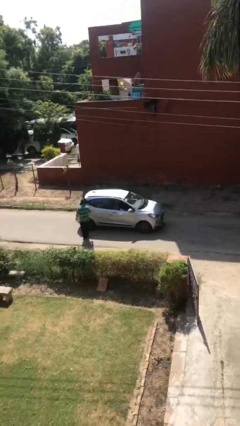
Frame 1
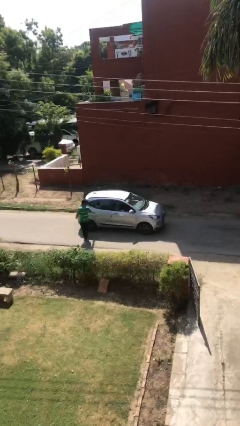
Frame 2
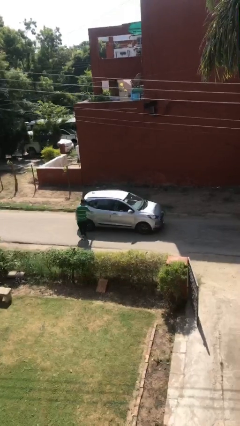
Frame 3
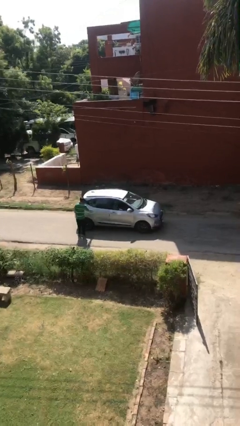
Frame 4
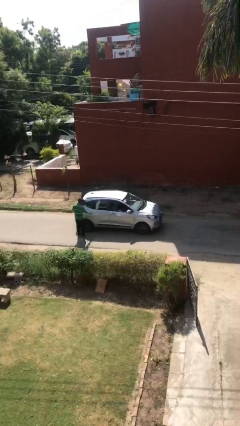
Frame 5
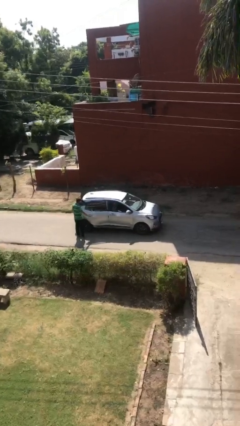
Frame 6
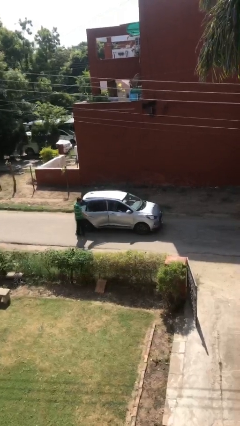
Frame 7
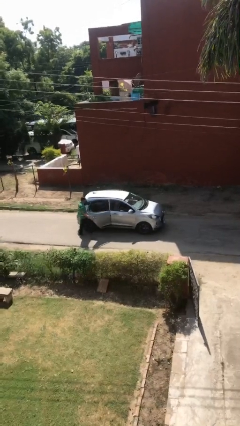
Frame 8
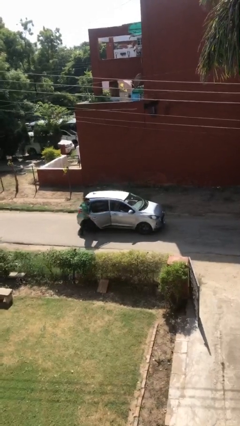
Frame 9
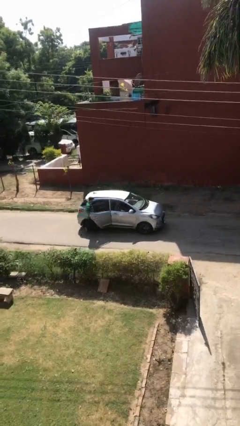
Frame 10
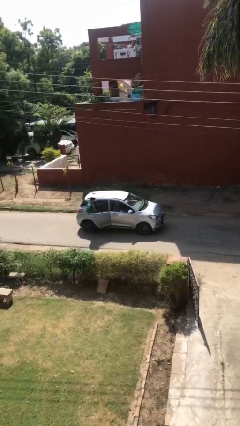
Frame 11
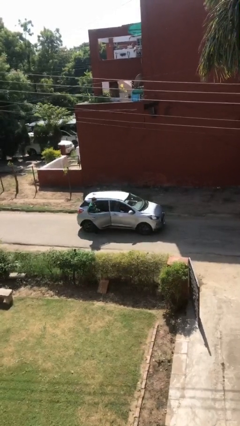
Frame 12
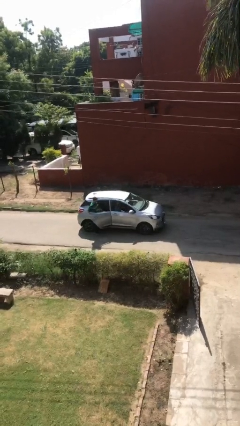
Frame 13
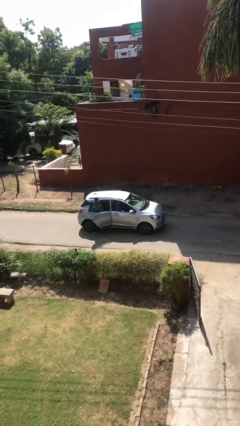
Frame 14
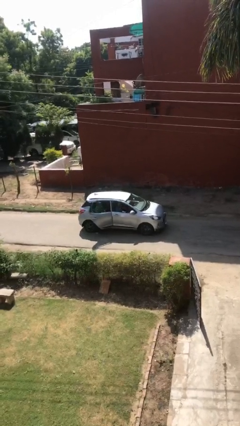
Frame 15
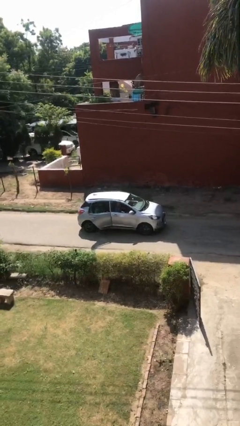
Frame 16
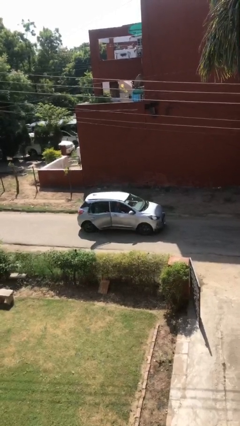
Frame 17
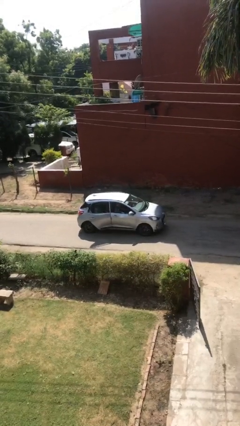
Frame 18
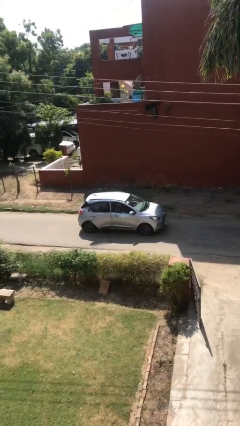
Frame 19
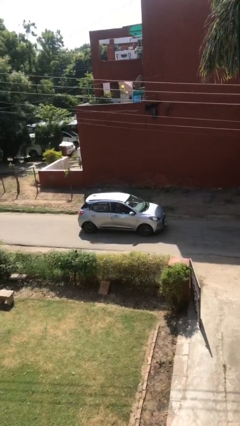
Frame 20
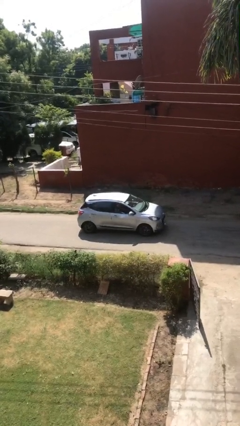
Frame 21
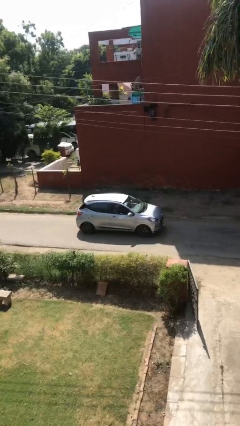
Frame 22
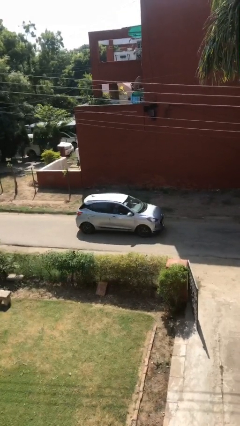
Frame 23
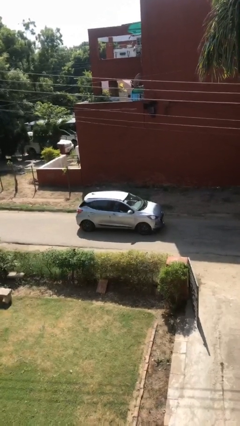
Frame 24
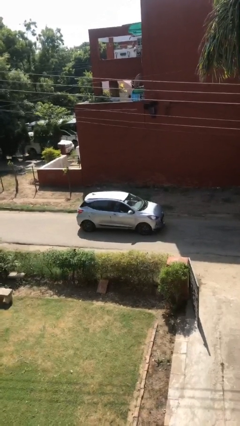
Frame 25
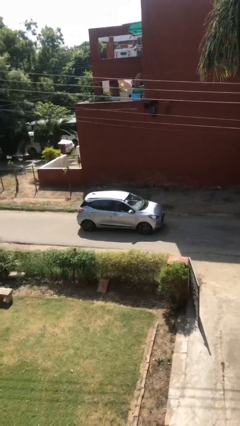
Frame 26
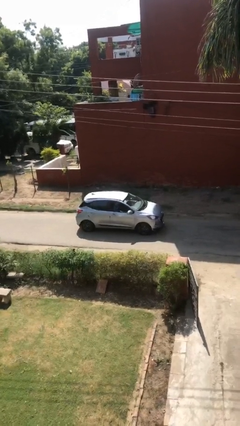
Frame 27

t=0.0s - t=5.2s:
car picks up person

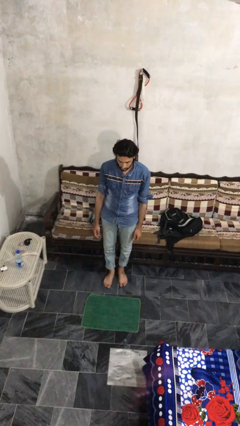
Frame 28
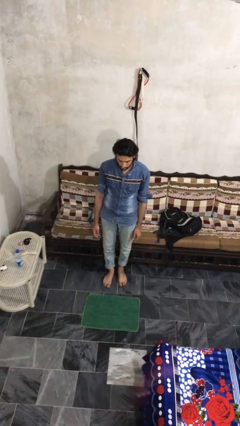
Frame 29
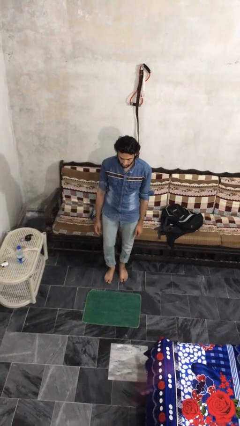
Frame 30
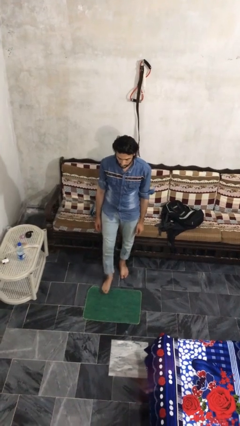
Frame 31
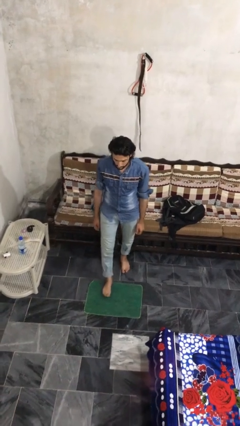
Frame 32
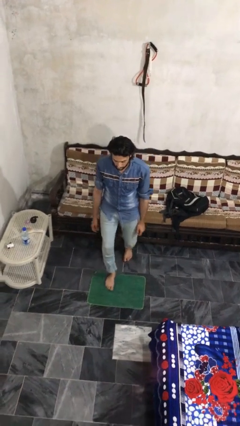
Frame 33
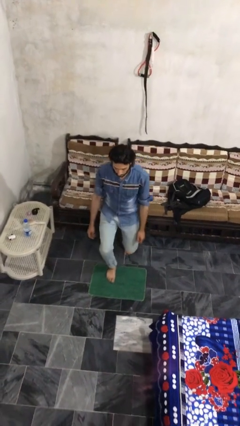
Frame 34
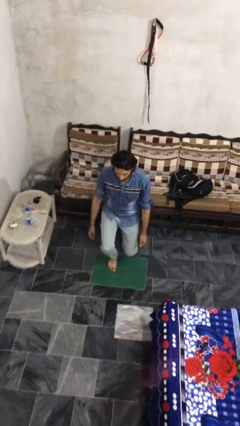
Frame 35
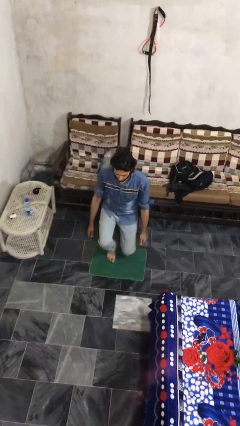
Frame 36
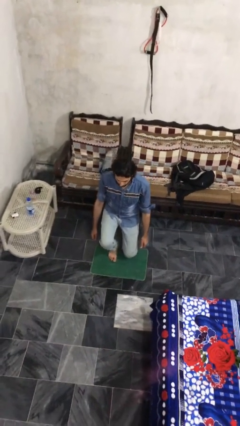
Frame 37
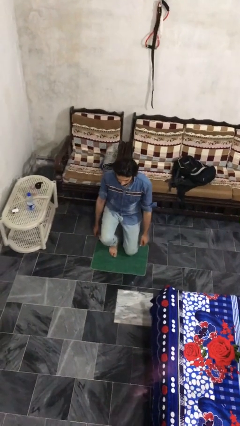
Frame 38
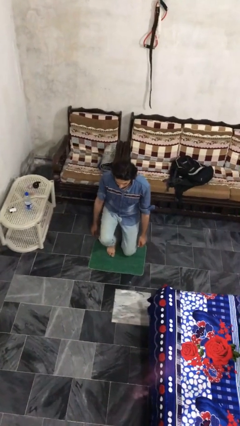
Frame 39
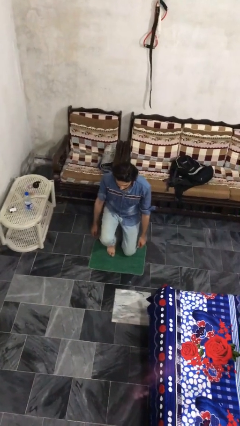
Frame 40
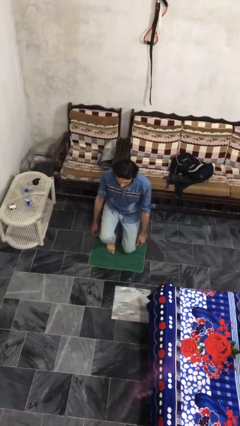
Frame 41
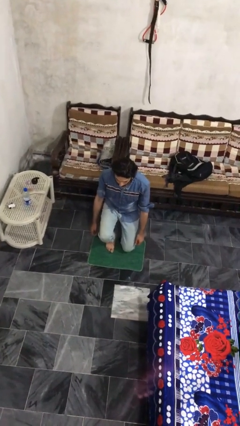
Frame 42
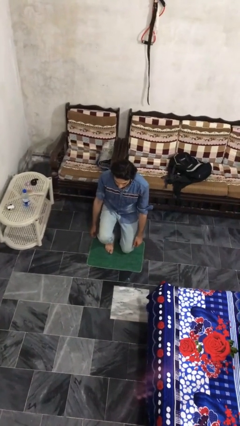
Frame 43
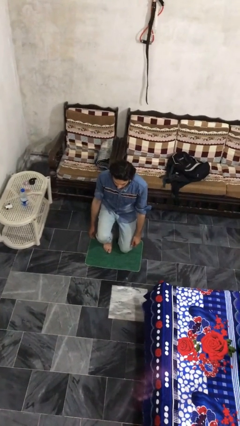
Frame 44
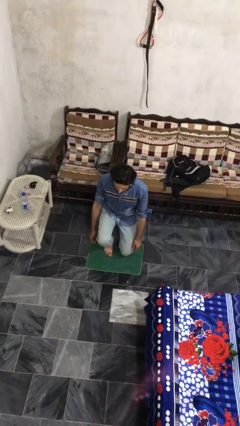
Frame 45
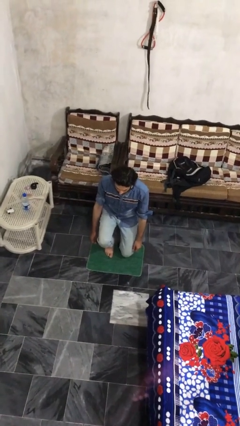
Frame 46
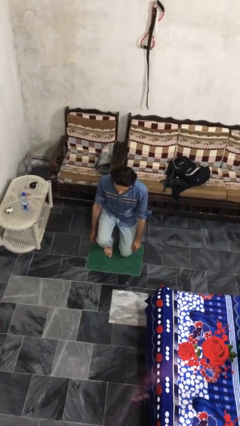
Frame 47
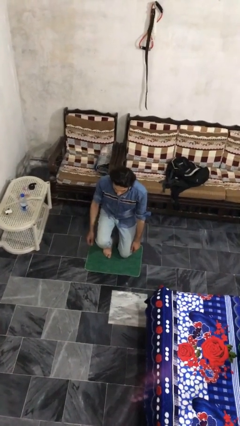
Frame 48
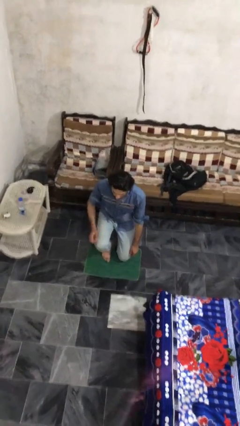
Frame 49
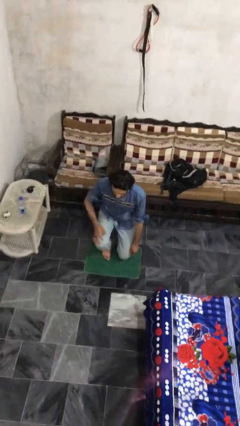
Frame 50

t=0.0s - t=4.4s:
person kneels

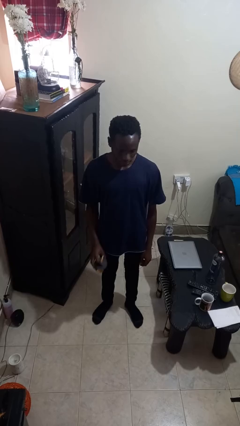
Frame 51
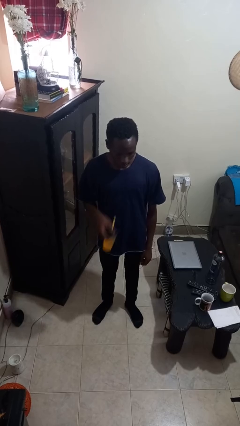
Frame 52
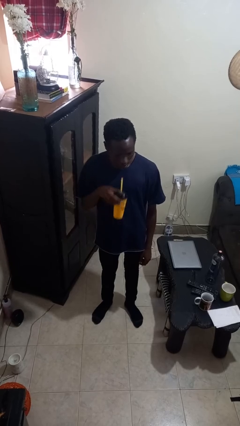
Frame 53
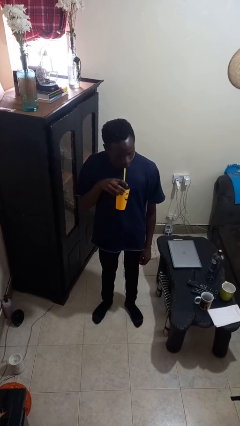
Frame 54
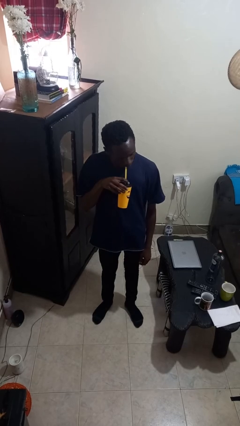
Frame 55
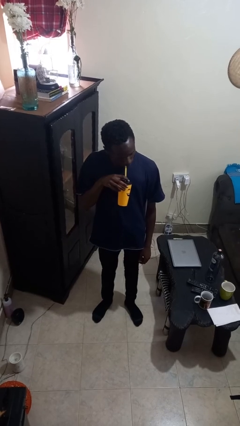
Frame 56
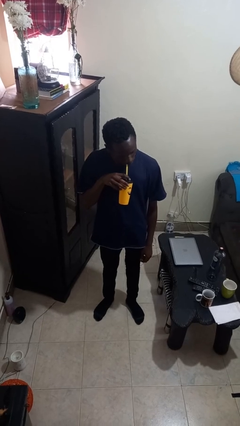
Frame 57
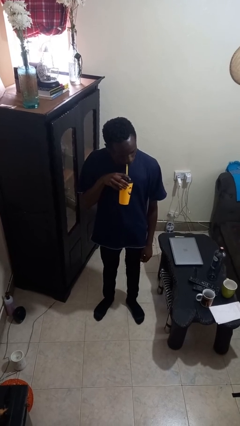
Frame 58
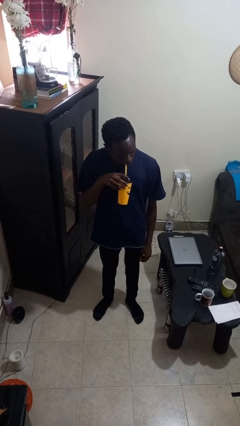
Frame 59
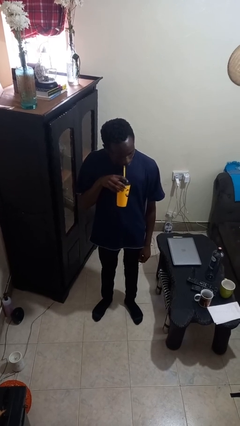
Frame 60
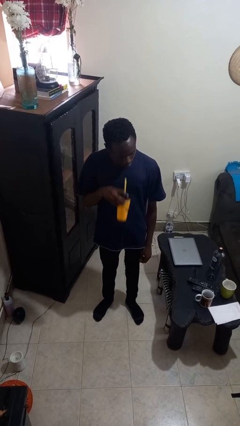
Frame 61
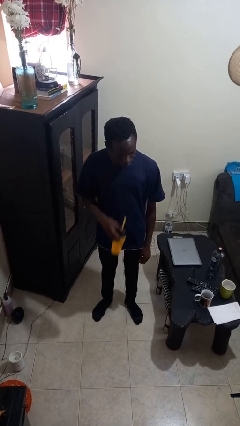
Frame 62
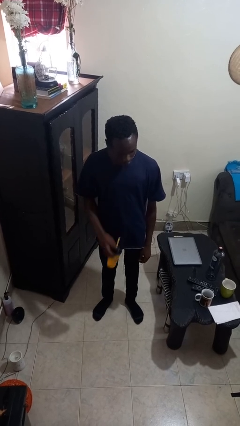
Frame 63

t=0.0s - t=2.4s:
person drinks from straw

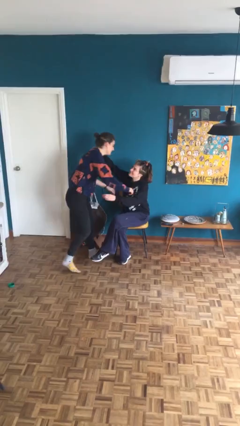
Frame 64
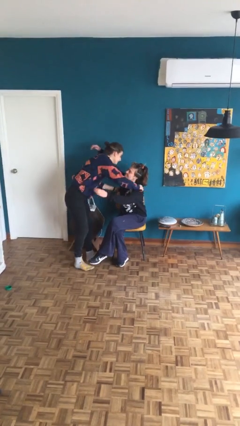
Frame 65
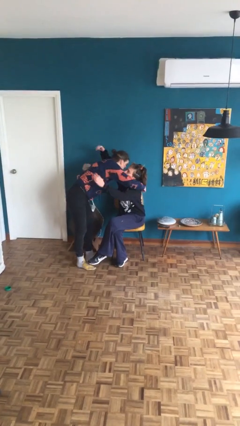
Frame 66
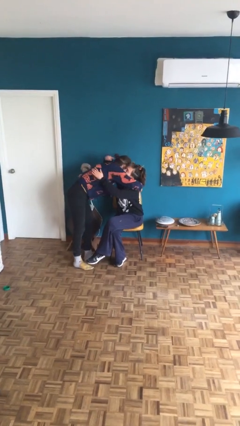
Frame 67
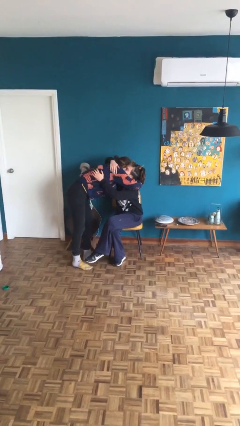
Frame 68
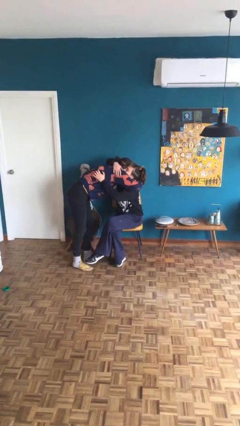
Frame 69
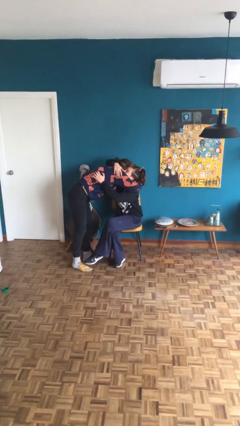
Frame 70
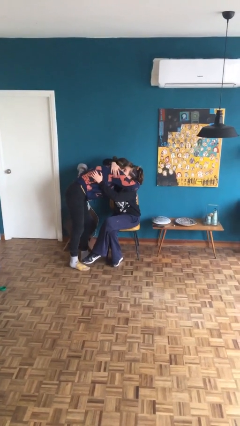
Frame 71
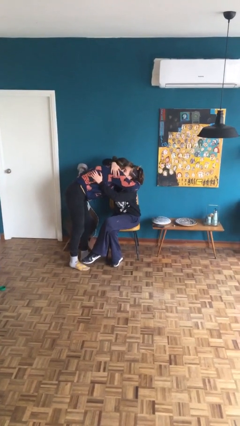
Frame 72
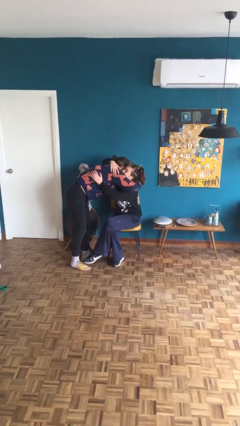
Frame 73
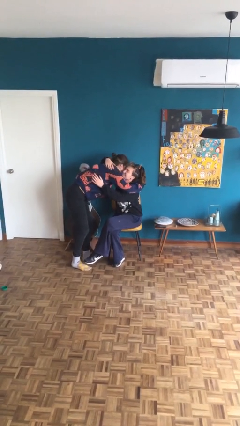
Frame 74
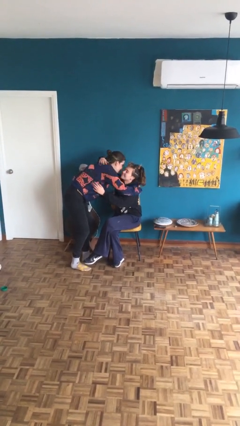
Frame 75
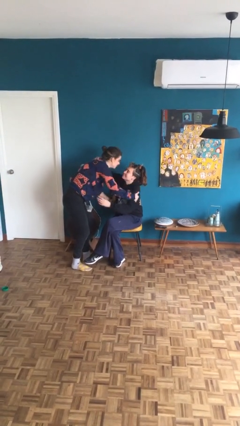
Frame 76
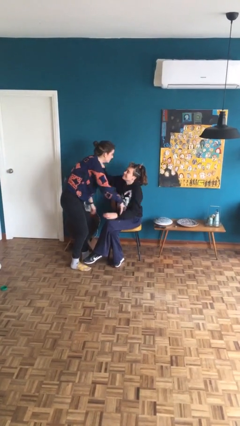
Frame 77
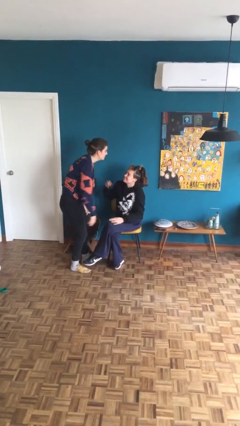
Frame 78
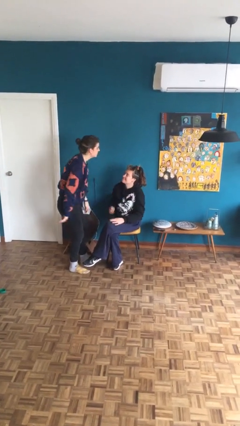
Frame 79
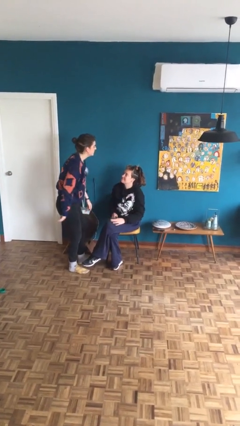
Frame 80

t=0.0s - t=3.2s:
person embraces person

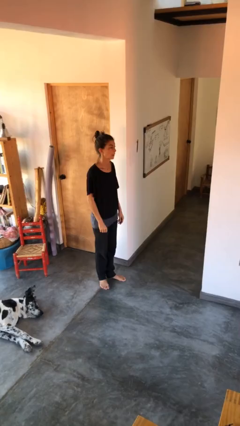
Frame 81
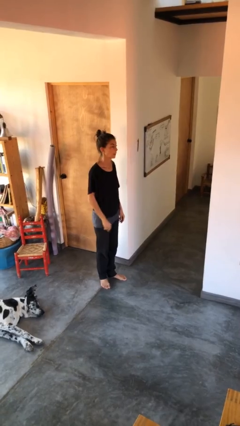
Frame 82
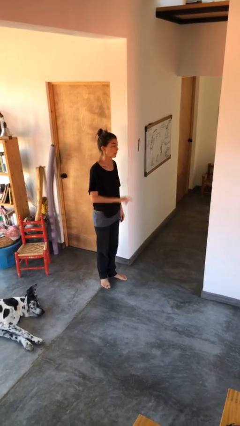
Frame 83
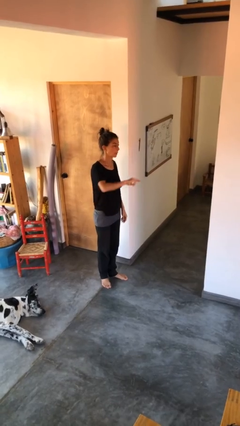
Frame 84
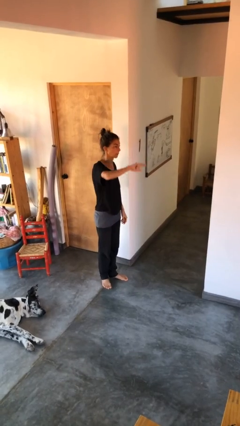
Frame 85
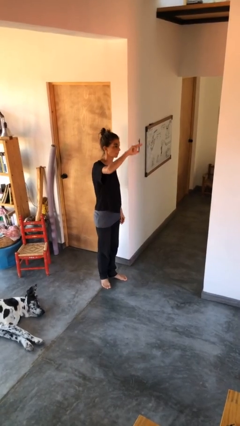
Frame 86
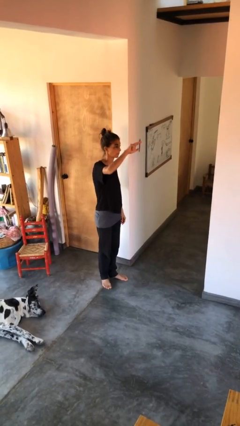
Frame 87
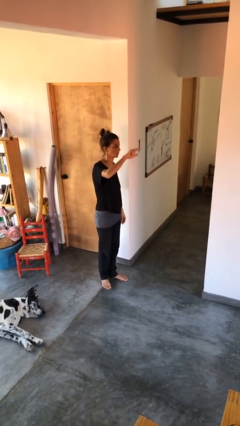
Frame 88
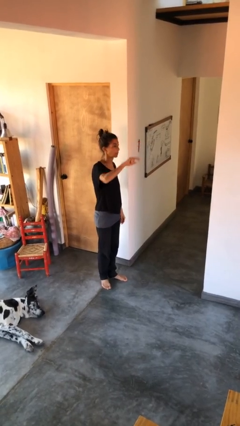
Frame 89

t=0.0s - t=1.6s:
person gestures swipe up

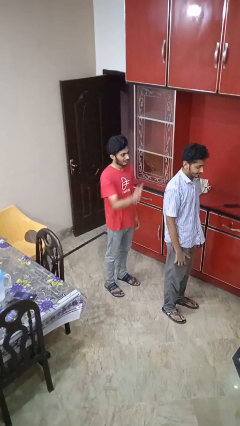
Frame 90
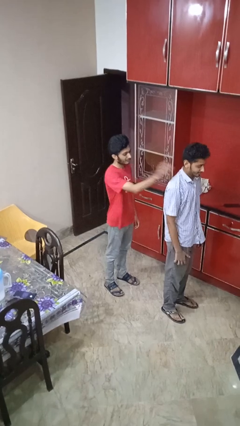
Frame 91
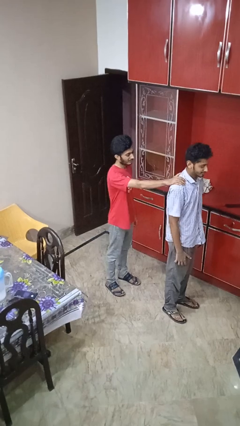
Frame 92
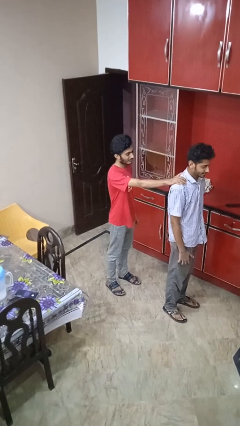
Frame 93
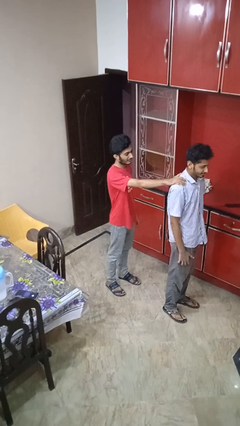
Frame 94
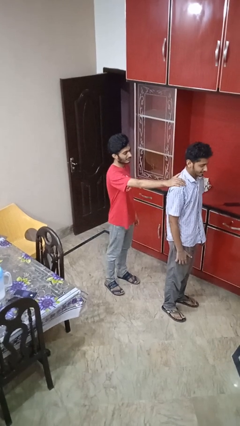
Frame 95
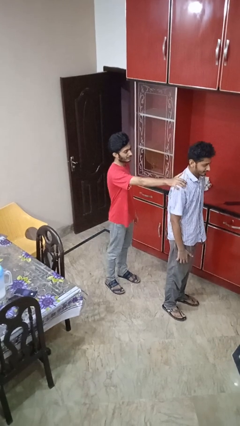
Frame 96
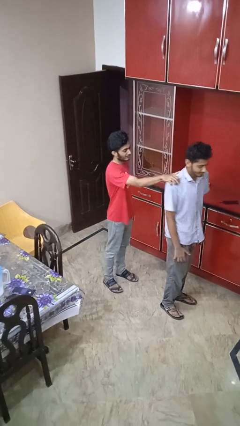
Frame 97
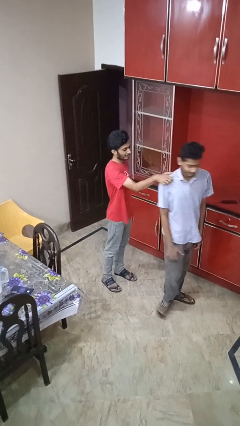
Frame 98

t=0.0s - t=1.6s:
person grabs person by shoulder
